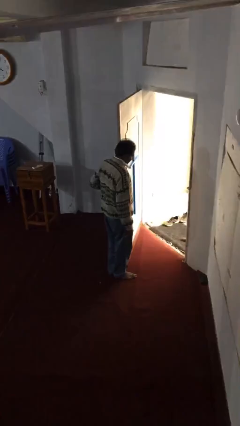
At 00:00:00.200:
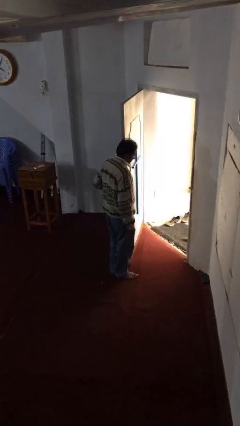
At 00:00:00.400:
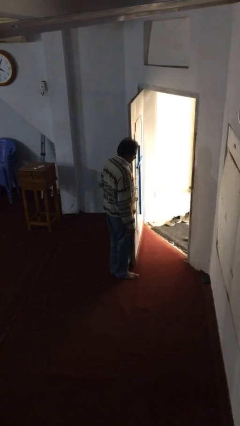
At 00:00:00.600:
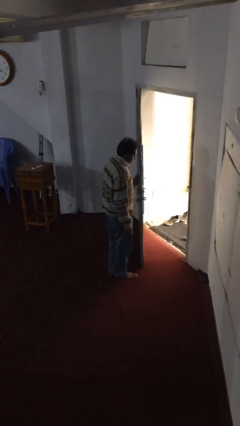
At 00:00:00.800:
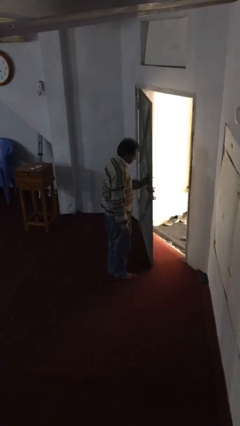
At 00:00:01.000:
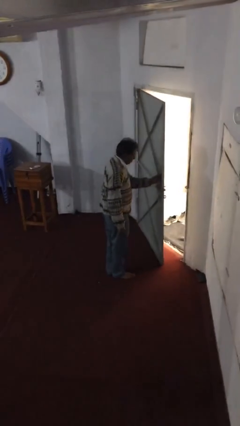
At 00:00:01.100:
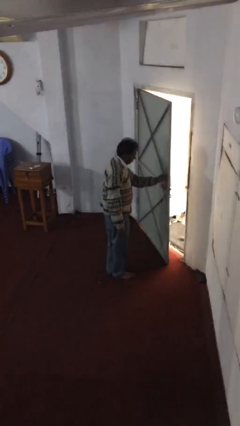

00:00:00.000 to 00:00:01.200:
person closes facility door

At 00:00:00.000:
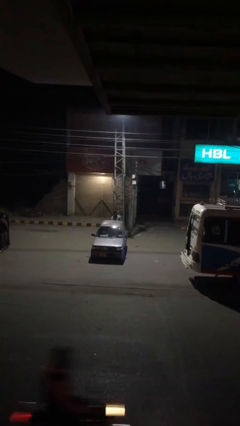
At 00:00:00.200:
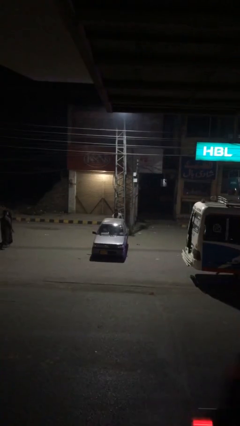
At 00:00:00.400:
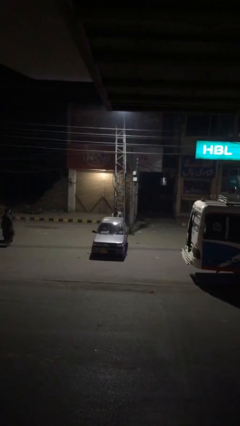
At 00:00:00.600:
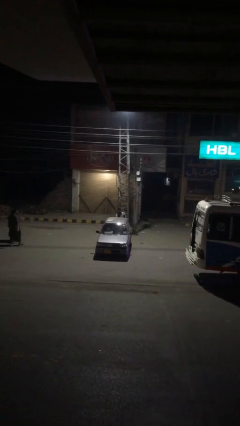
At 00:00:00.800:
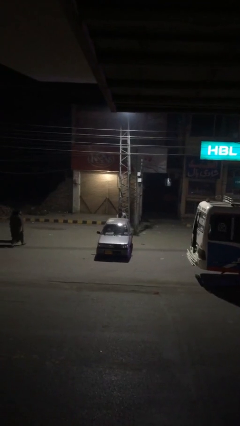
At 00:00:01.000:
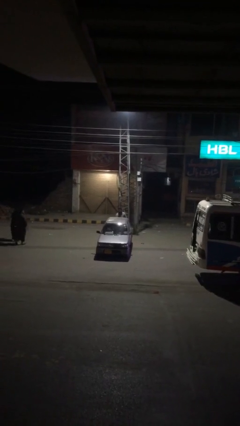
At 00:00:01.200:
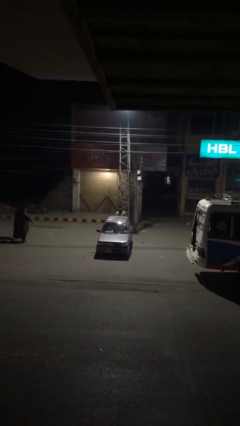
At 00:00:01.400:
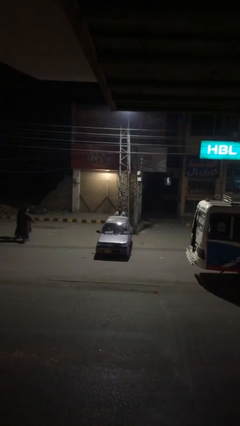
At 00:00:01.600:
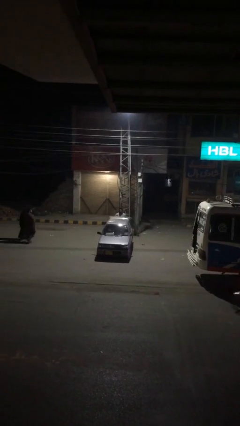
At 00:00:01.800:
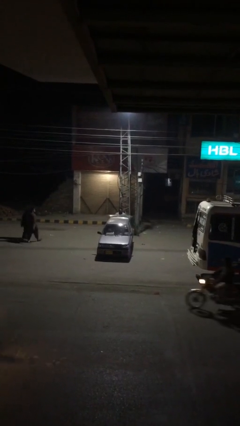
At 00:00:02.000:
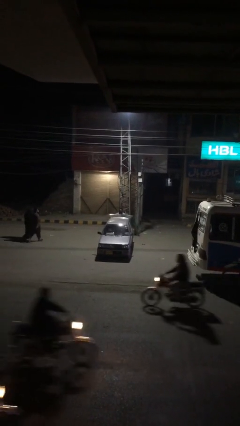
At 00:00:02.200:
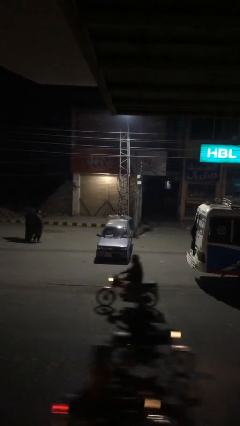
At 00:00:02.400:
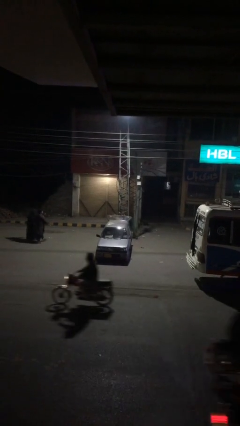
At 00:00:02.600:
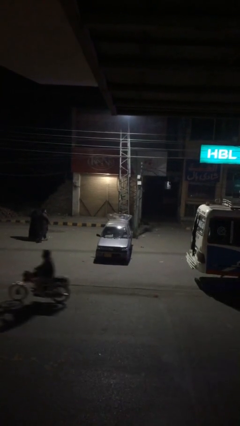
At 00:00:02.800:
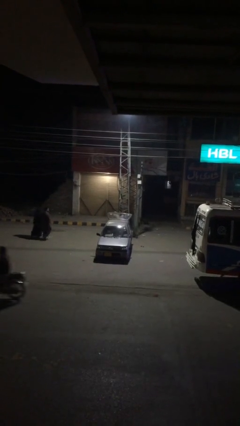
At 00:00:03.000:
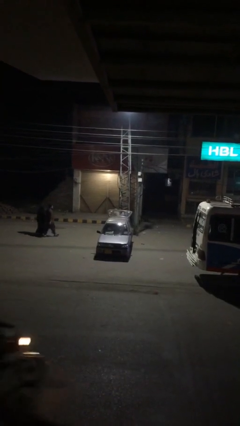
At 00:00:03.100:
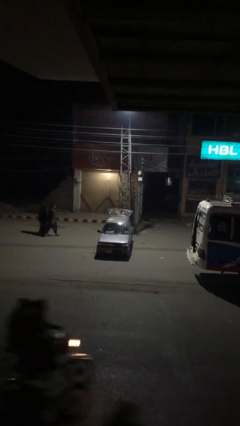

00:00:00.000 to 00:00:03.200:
person opens car trunk

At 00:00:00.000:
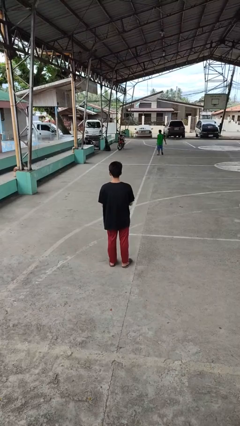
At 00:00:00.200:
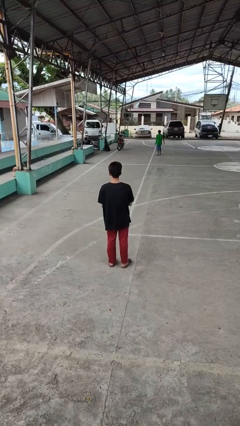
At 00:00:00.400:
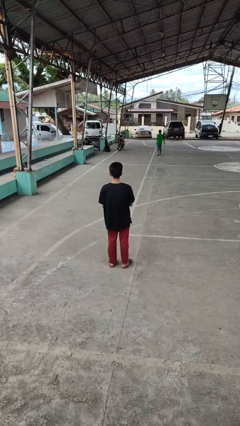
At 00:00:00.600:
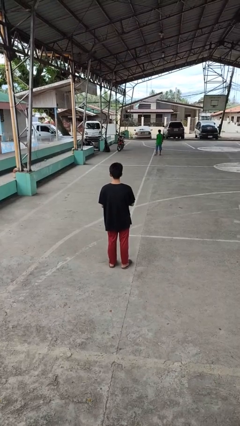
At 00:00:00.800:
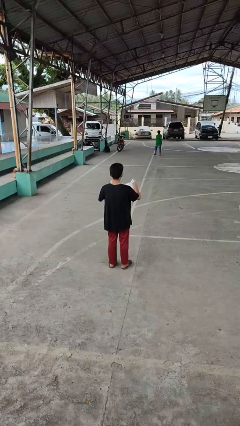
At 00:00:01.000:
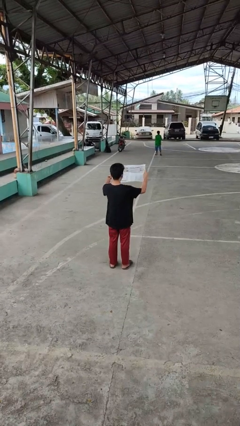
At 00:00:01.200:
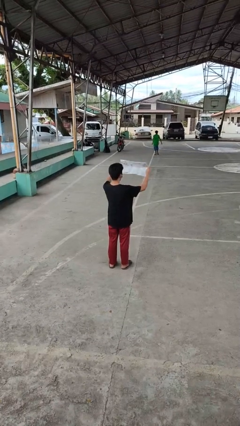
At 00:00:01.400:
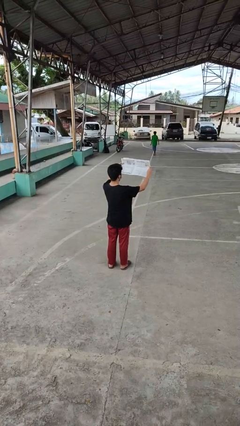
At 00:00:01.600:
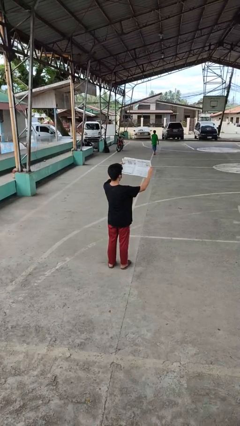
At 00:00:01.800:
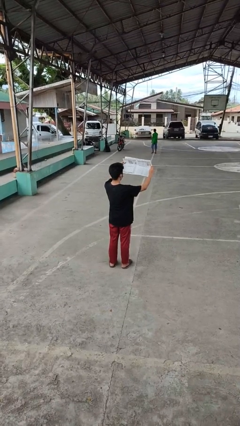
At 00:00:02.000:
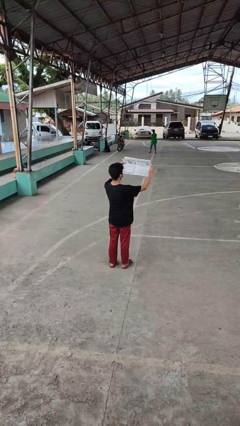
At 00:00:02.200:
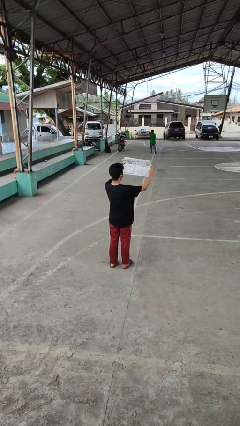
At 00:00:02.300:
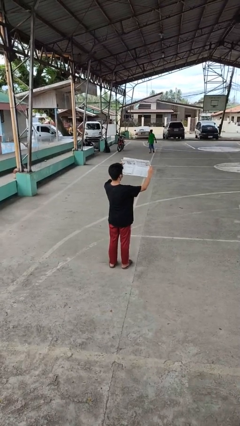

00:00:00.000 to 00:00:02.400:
person reads newspaper

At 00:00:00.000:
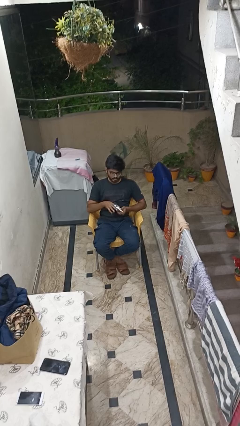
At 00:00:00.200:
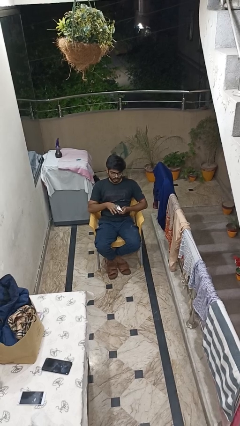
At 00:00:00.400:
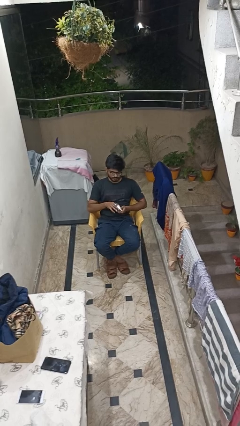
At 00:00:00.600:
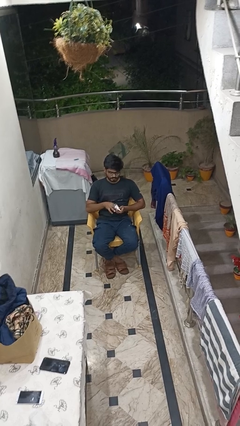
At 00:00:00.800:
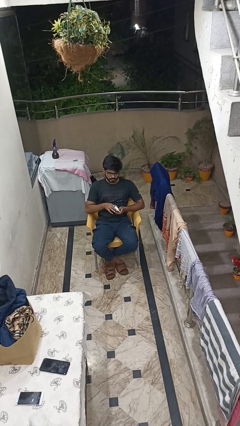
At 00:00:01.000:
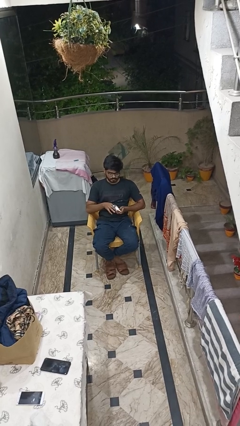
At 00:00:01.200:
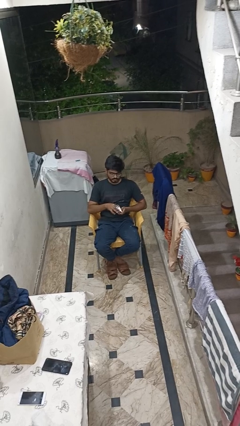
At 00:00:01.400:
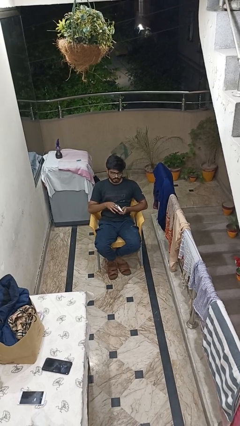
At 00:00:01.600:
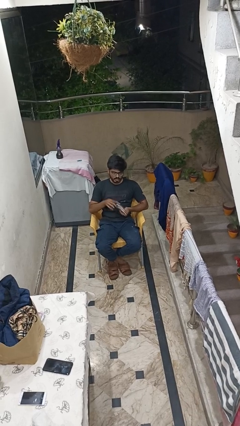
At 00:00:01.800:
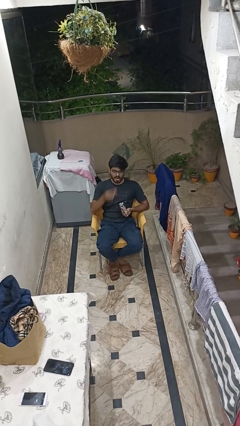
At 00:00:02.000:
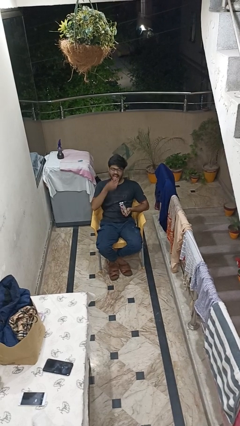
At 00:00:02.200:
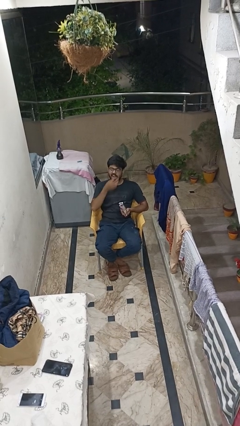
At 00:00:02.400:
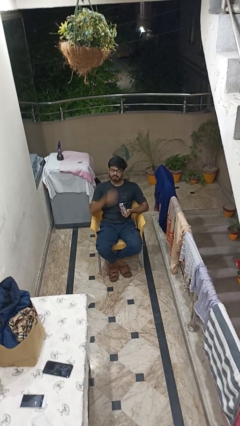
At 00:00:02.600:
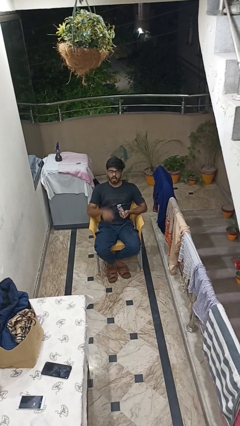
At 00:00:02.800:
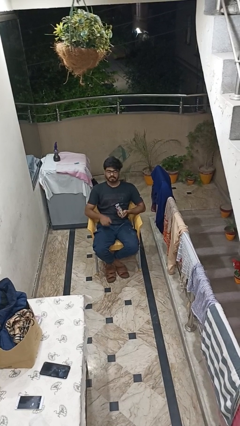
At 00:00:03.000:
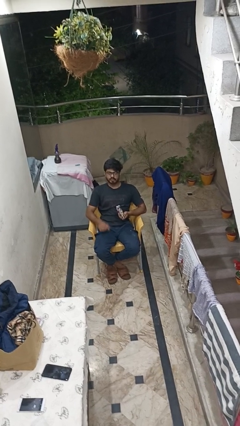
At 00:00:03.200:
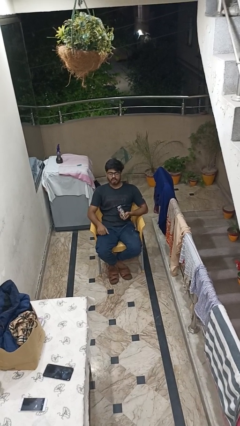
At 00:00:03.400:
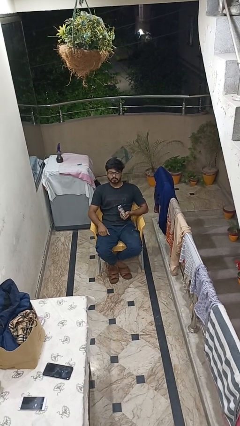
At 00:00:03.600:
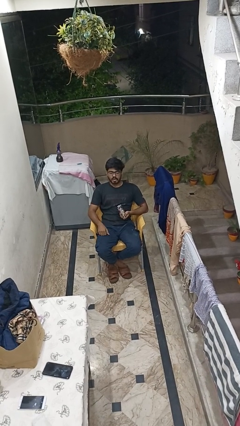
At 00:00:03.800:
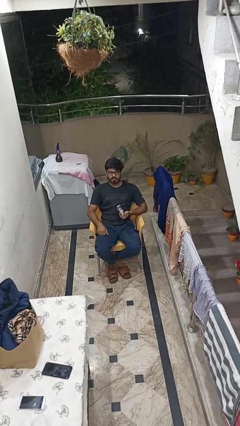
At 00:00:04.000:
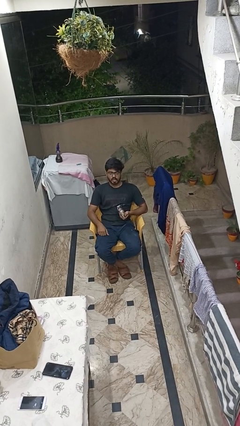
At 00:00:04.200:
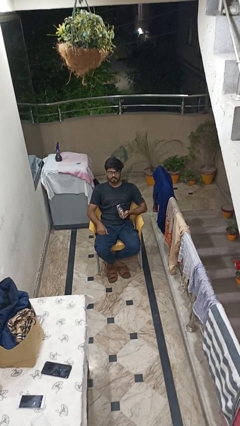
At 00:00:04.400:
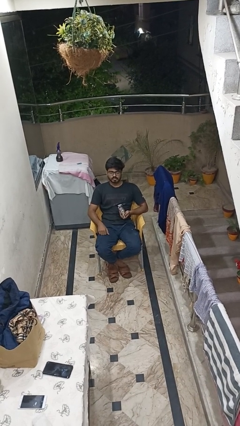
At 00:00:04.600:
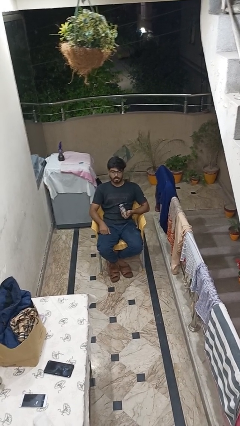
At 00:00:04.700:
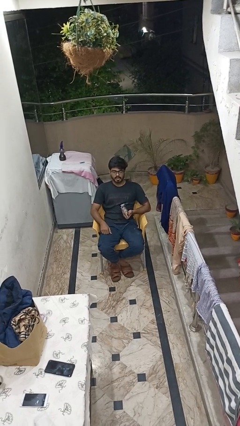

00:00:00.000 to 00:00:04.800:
person eats snack from bag

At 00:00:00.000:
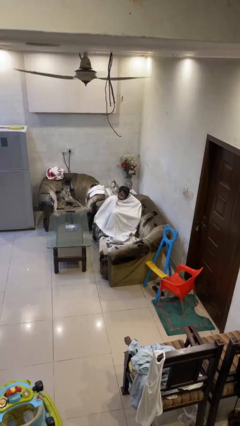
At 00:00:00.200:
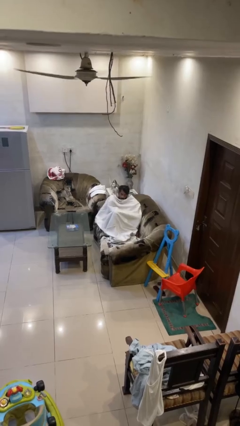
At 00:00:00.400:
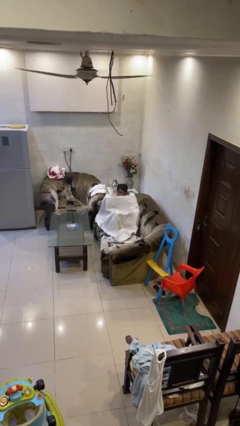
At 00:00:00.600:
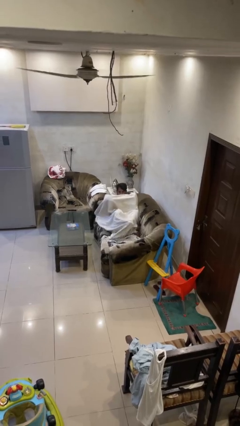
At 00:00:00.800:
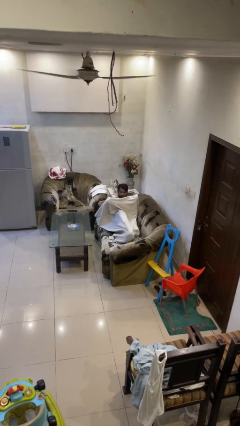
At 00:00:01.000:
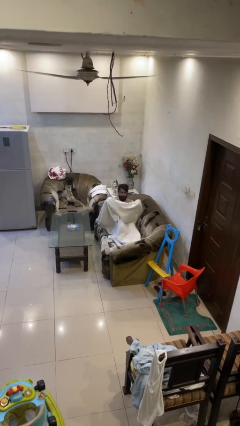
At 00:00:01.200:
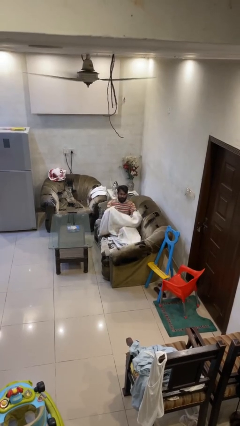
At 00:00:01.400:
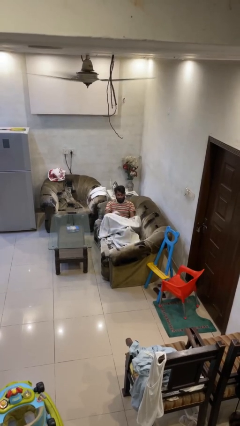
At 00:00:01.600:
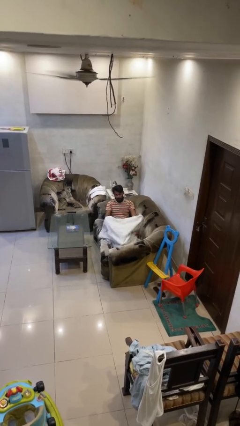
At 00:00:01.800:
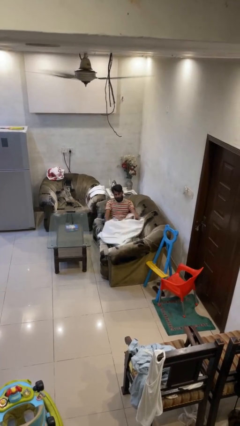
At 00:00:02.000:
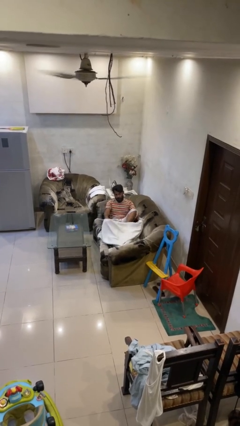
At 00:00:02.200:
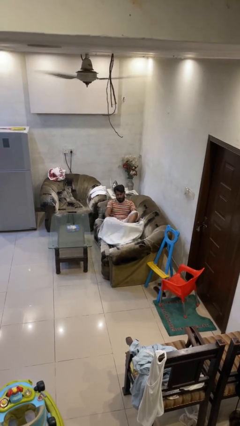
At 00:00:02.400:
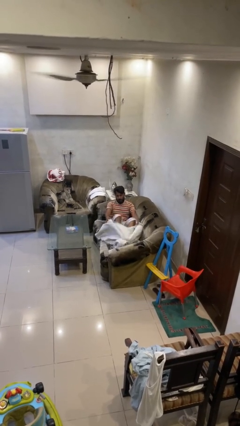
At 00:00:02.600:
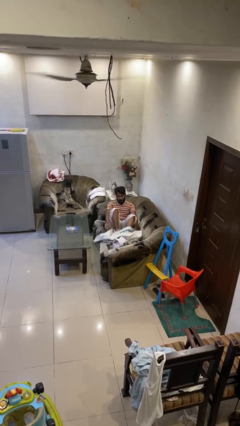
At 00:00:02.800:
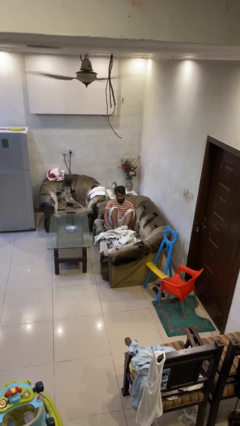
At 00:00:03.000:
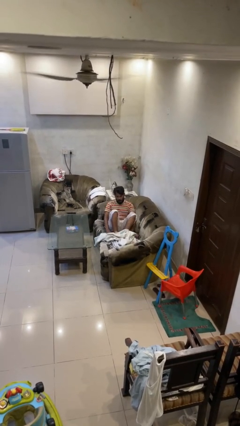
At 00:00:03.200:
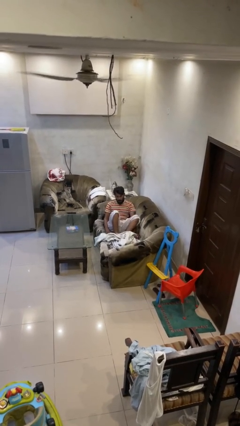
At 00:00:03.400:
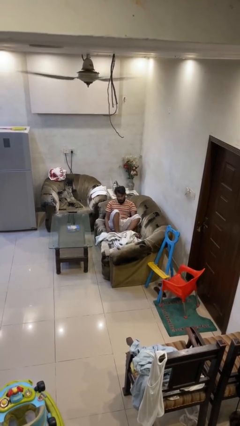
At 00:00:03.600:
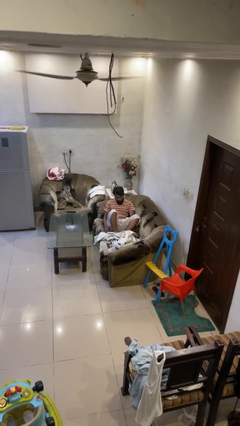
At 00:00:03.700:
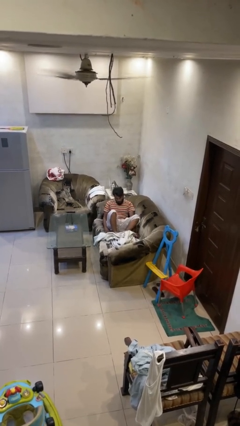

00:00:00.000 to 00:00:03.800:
person uncovers with blanket

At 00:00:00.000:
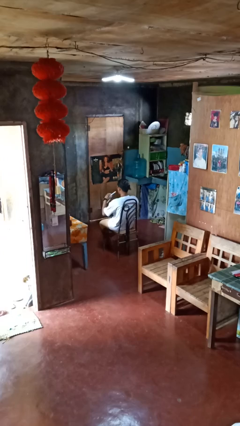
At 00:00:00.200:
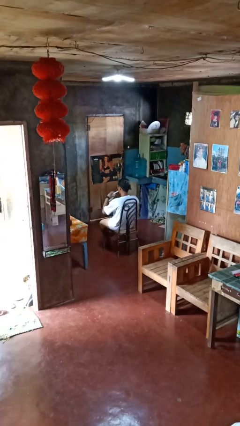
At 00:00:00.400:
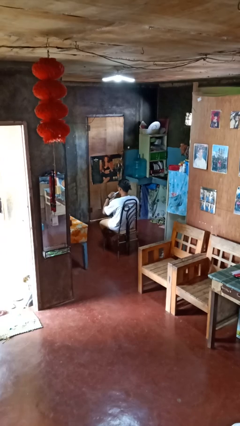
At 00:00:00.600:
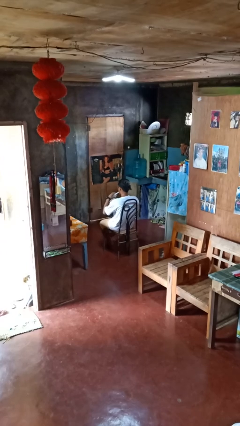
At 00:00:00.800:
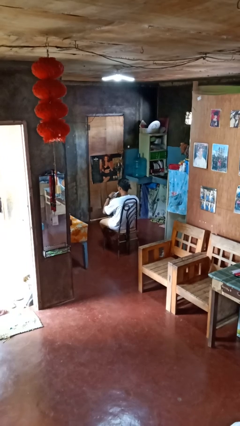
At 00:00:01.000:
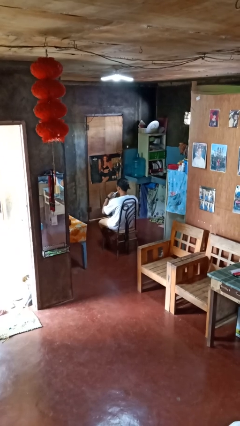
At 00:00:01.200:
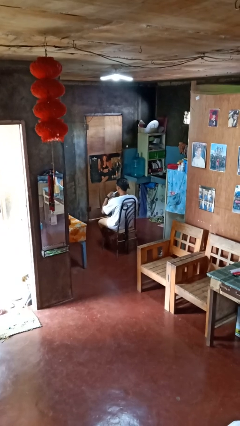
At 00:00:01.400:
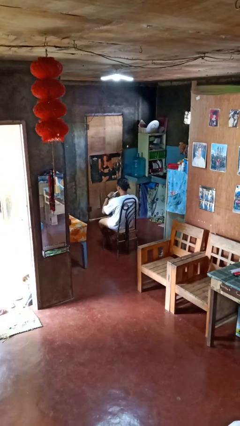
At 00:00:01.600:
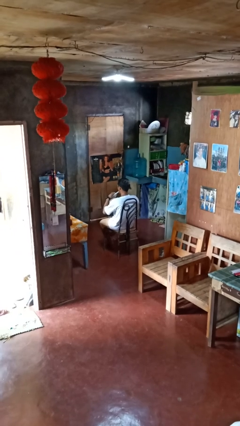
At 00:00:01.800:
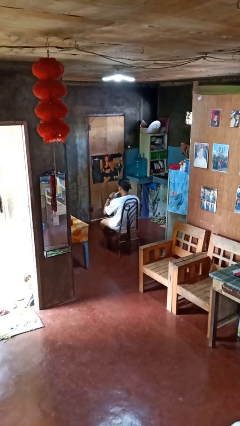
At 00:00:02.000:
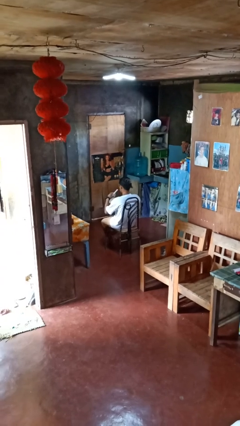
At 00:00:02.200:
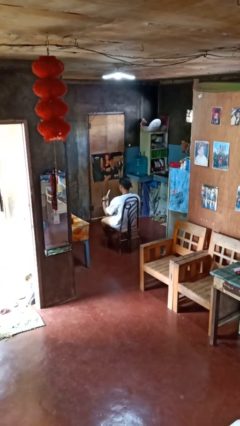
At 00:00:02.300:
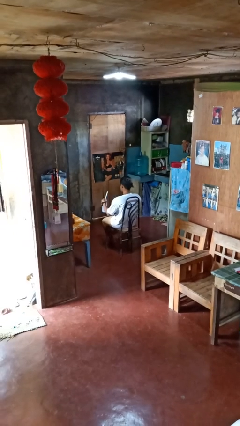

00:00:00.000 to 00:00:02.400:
person drinks from straw
